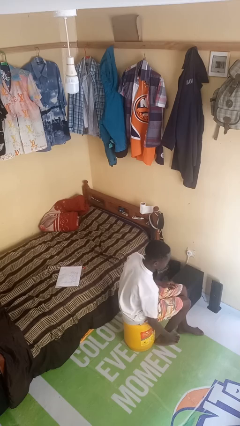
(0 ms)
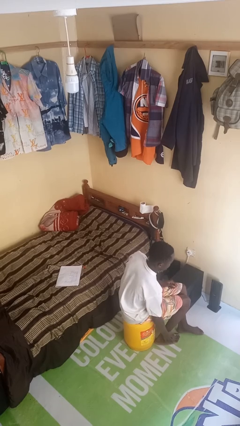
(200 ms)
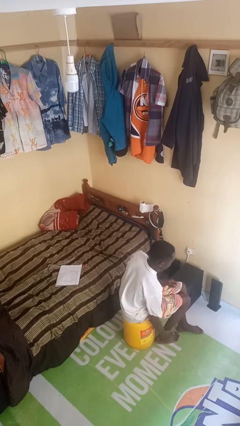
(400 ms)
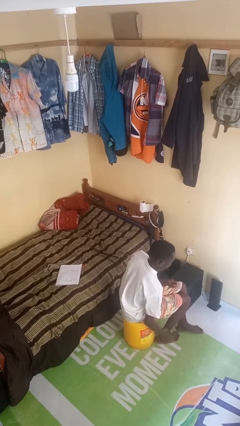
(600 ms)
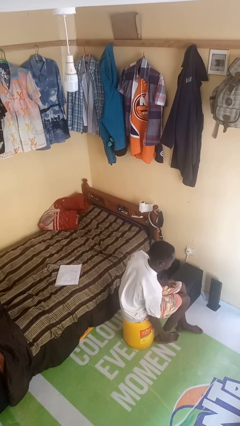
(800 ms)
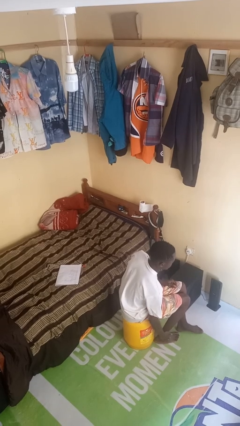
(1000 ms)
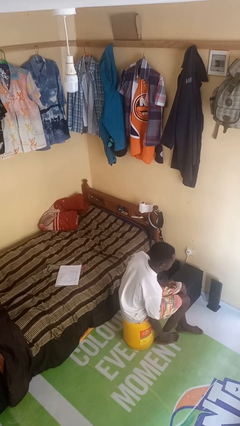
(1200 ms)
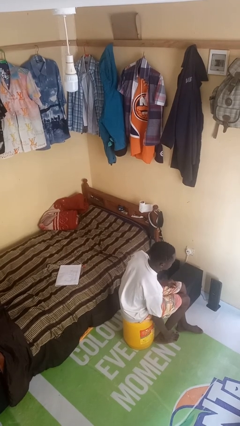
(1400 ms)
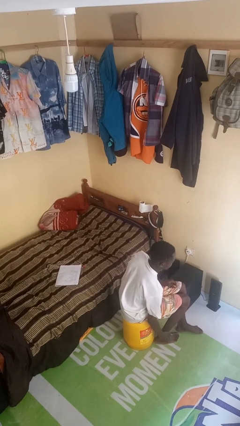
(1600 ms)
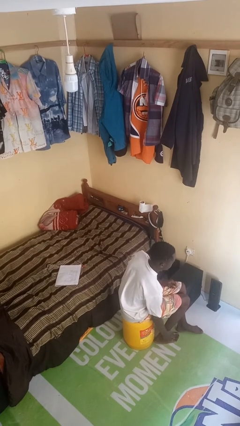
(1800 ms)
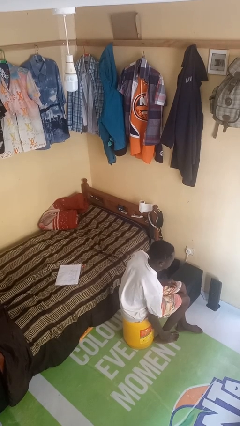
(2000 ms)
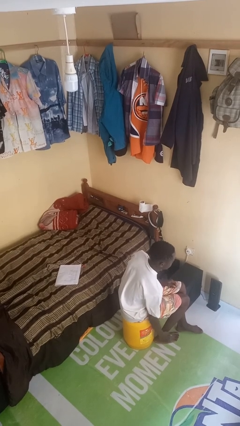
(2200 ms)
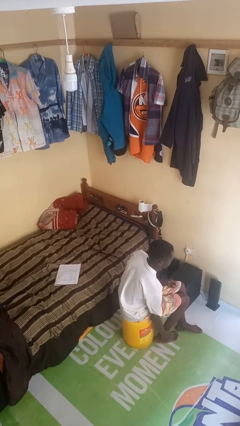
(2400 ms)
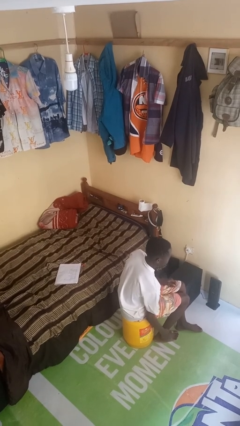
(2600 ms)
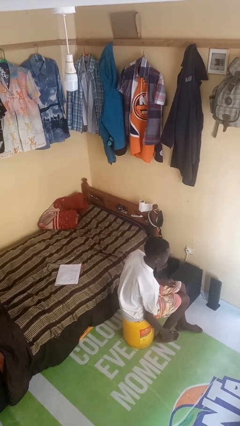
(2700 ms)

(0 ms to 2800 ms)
person rubs foot

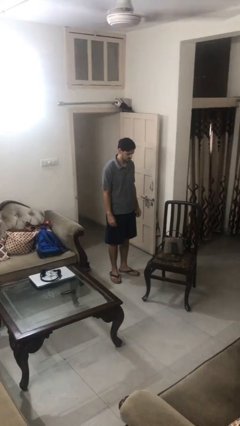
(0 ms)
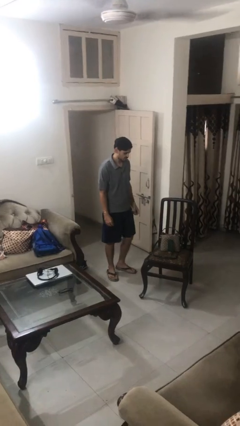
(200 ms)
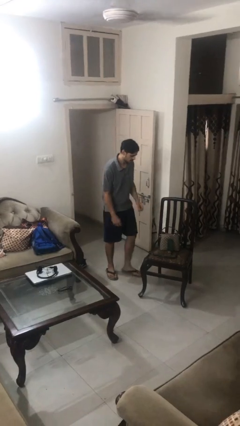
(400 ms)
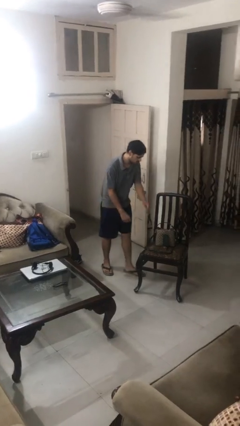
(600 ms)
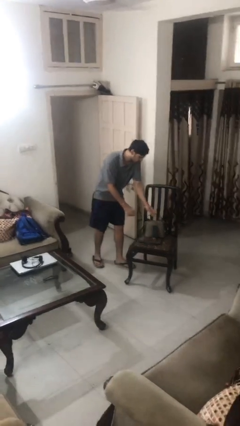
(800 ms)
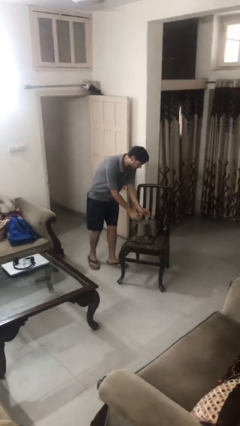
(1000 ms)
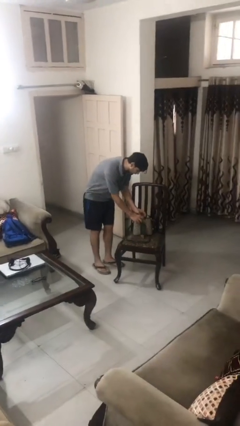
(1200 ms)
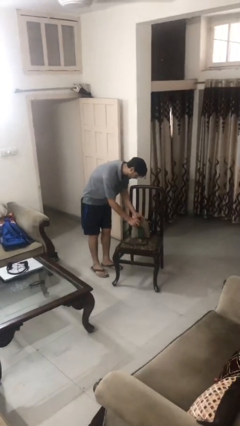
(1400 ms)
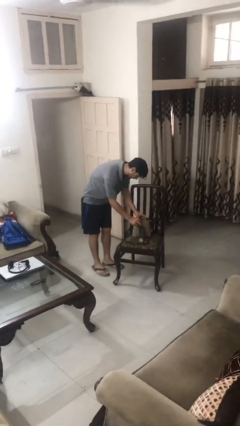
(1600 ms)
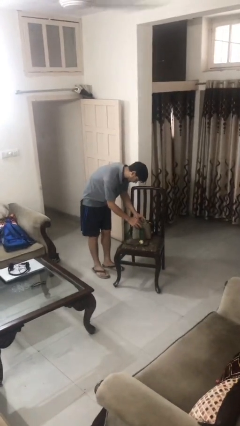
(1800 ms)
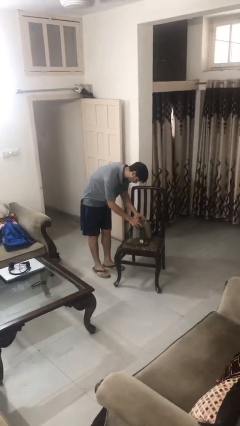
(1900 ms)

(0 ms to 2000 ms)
person searches in purse

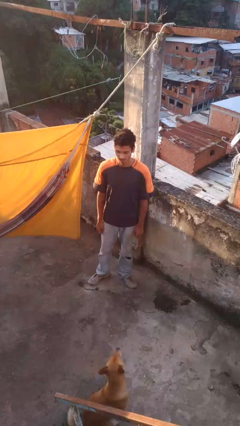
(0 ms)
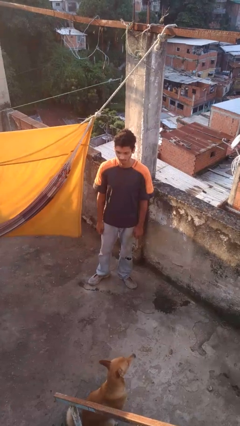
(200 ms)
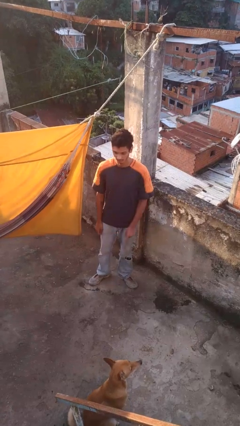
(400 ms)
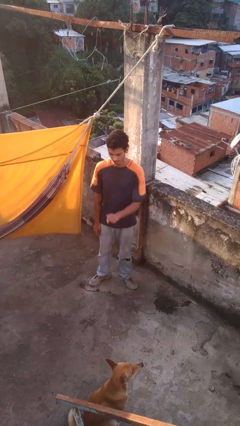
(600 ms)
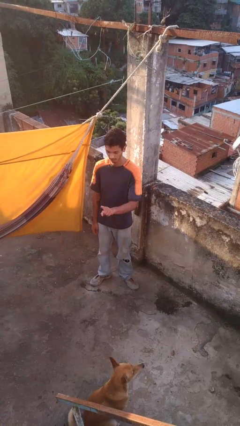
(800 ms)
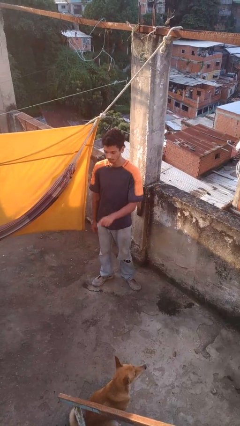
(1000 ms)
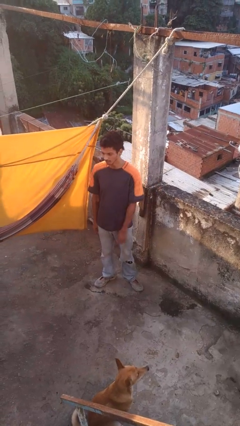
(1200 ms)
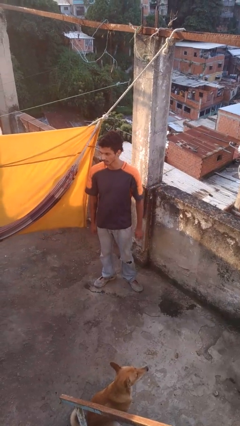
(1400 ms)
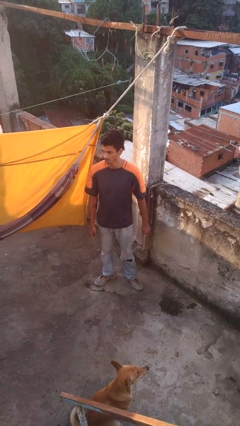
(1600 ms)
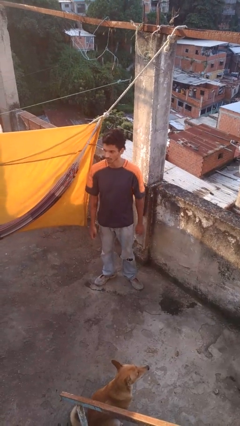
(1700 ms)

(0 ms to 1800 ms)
person gestures number one

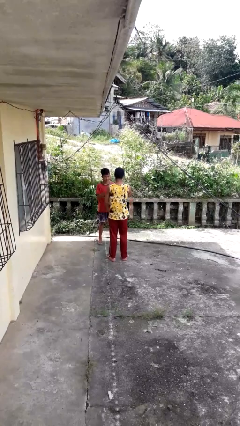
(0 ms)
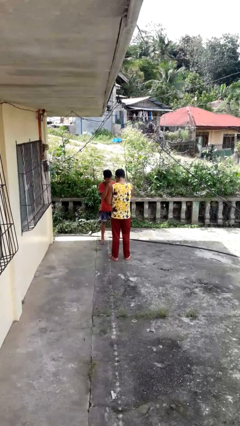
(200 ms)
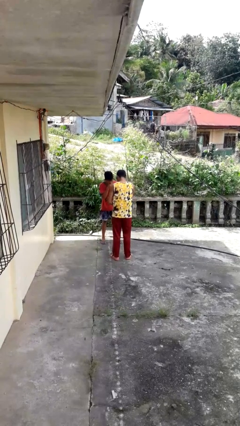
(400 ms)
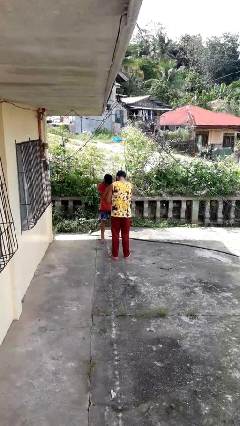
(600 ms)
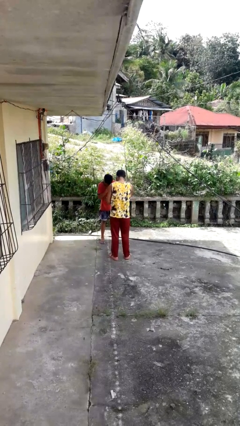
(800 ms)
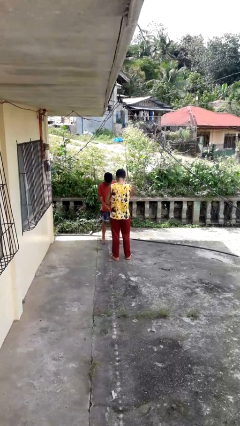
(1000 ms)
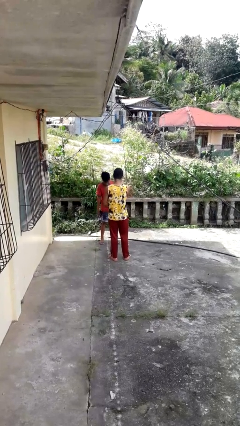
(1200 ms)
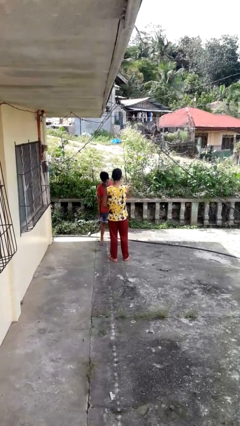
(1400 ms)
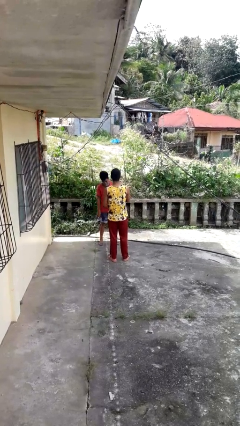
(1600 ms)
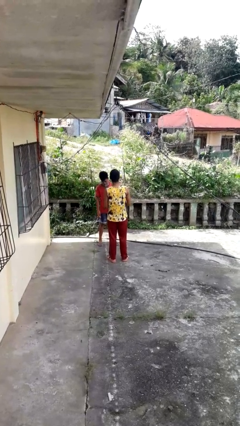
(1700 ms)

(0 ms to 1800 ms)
person laughs with person

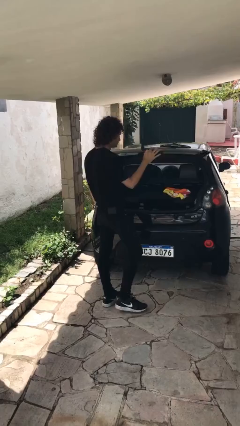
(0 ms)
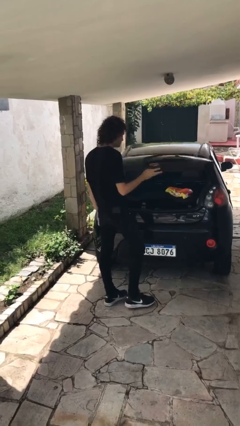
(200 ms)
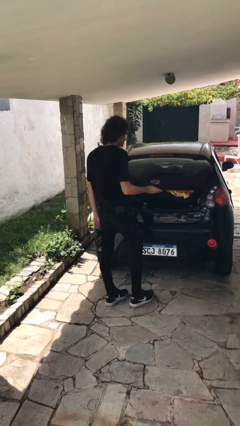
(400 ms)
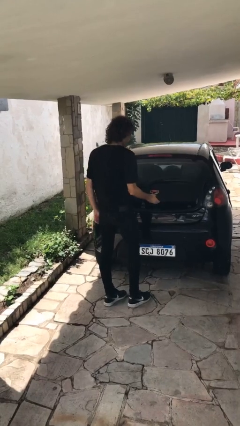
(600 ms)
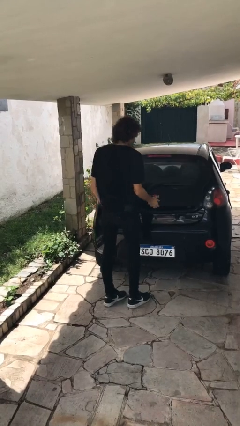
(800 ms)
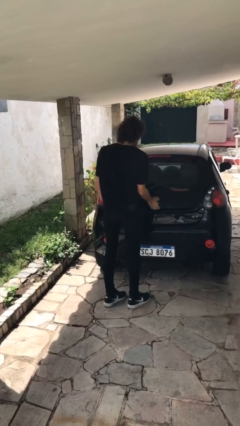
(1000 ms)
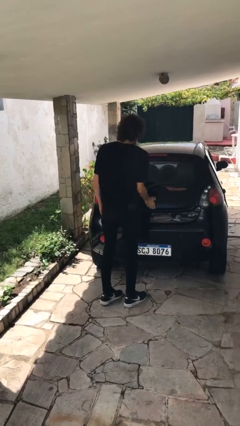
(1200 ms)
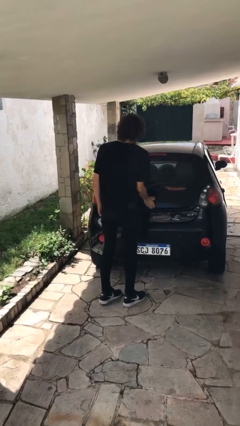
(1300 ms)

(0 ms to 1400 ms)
person closes car trunk

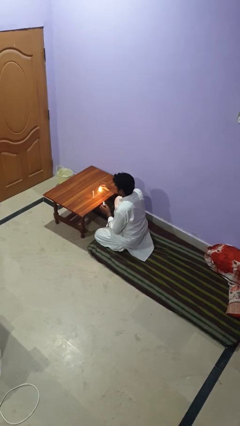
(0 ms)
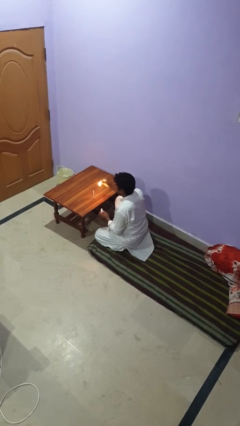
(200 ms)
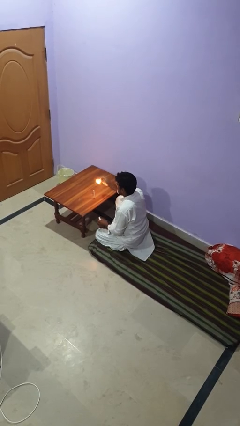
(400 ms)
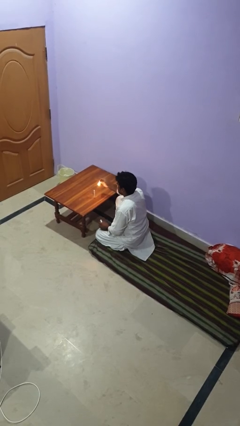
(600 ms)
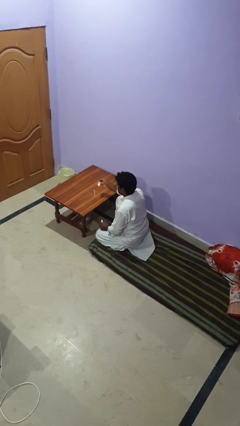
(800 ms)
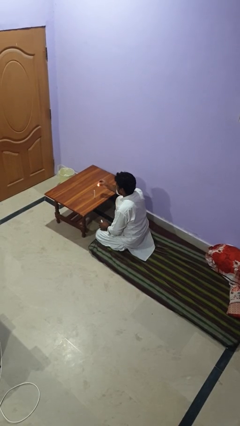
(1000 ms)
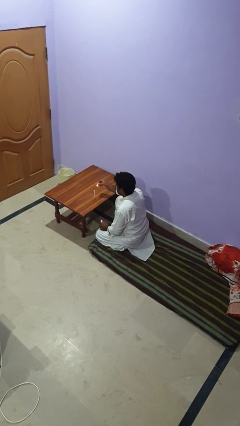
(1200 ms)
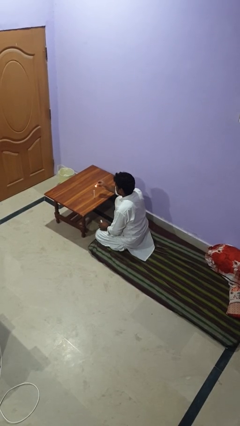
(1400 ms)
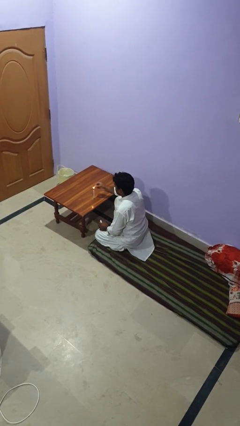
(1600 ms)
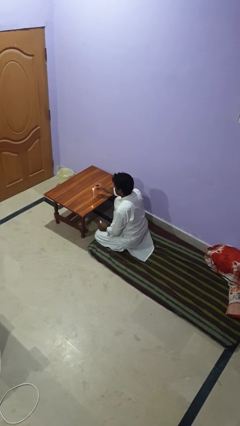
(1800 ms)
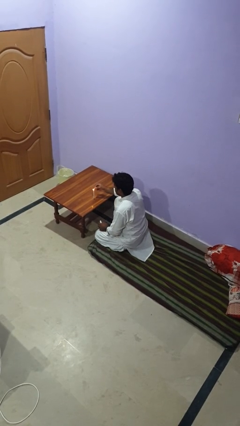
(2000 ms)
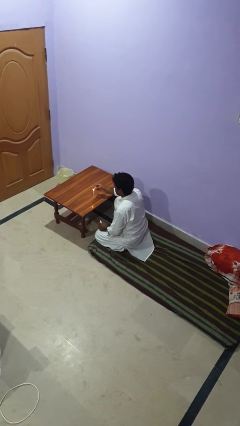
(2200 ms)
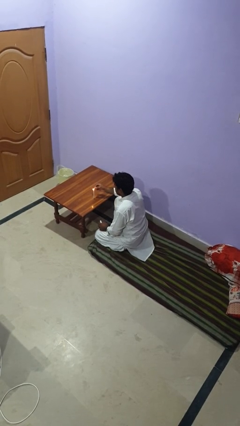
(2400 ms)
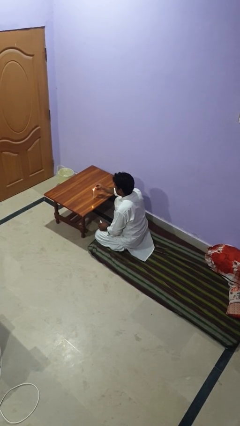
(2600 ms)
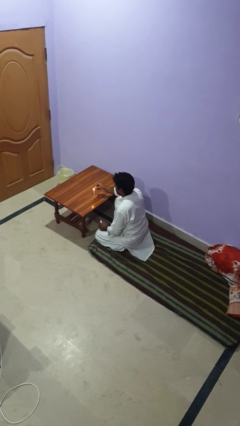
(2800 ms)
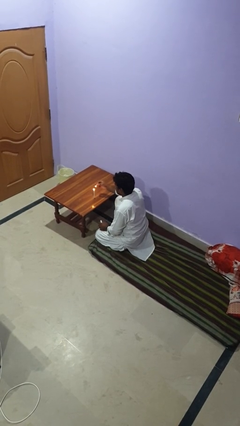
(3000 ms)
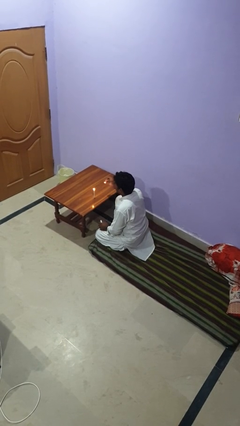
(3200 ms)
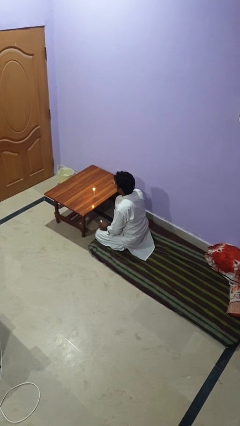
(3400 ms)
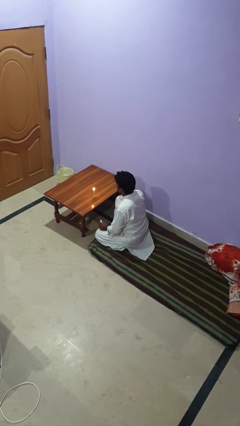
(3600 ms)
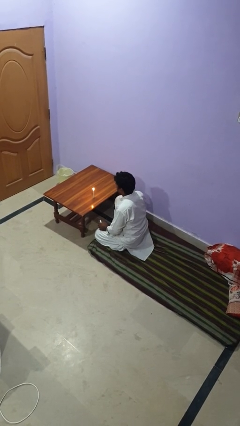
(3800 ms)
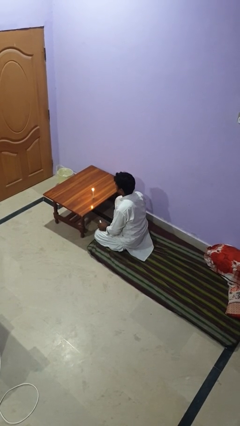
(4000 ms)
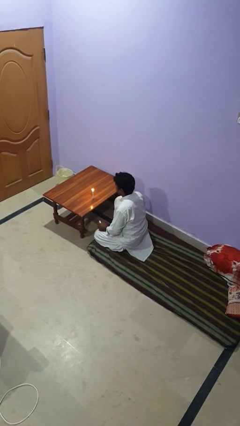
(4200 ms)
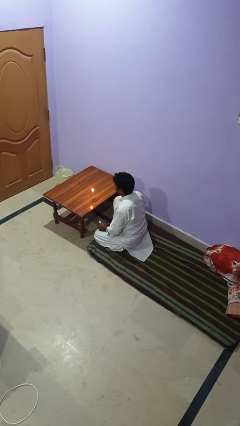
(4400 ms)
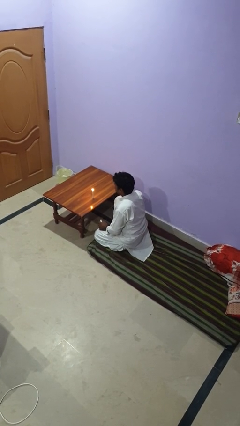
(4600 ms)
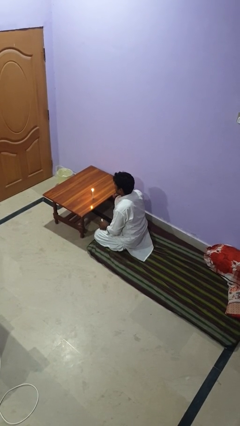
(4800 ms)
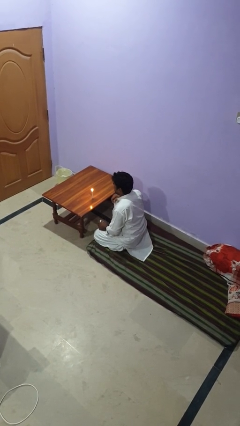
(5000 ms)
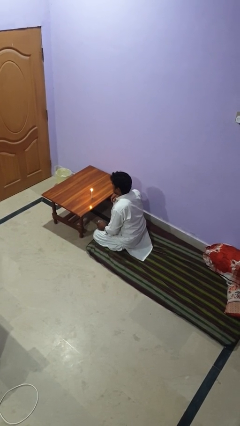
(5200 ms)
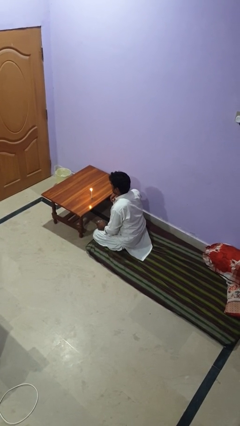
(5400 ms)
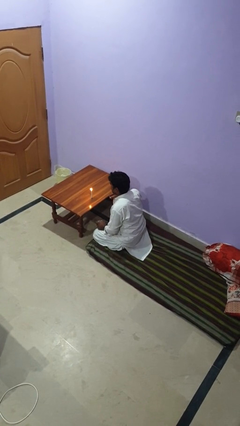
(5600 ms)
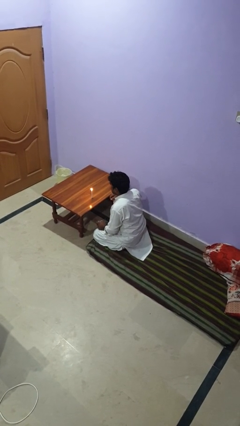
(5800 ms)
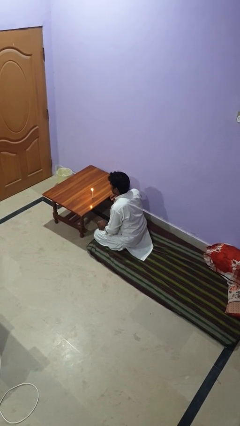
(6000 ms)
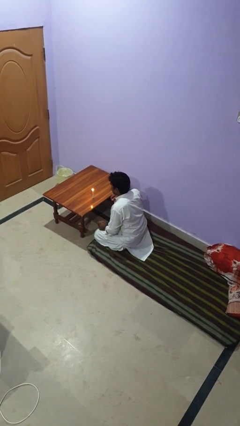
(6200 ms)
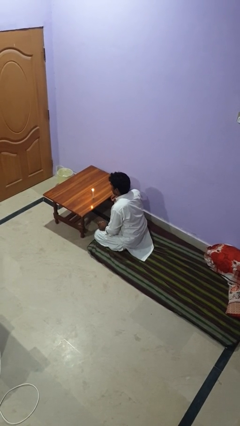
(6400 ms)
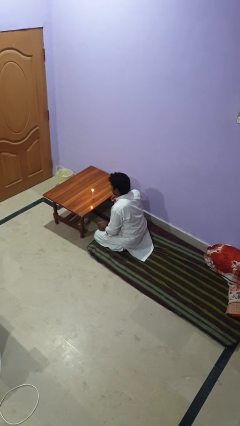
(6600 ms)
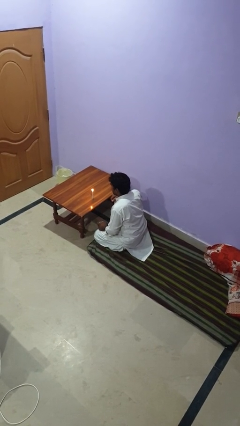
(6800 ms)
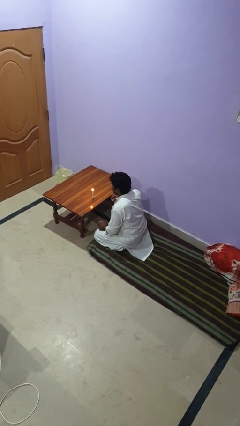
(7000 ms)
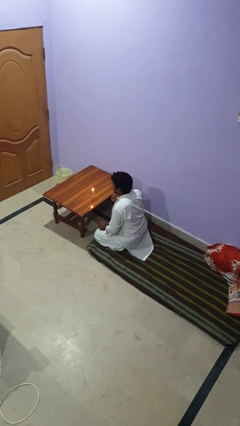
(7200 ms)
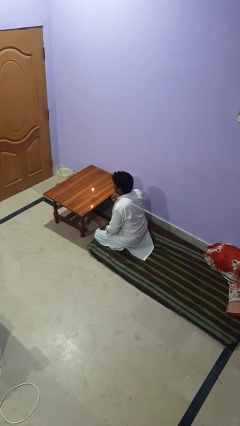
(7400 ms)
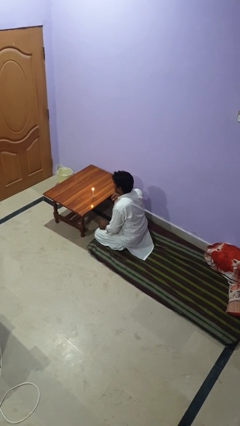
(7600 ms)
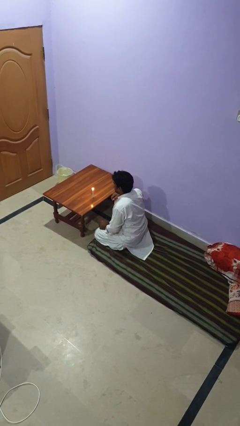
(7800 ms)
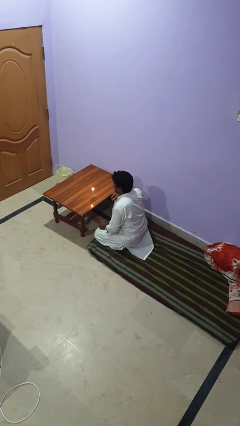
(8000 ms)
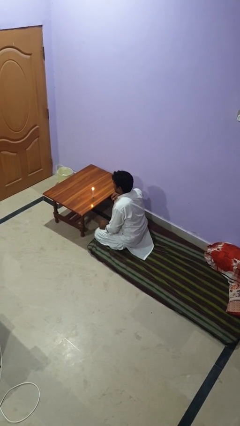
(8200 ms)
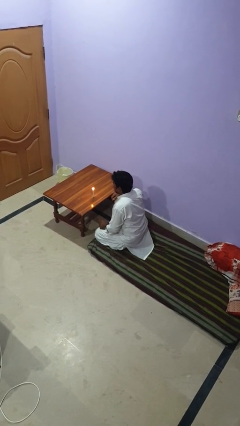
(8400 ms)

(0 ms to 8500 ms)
person lights candle
